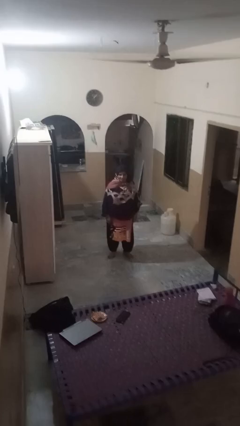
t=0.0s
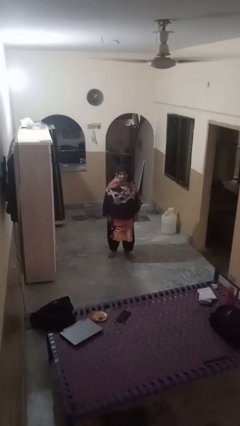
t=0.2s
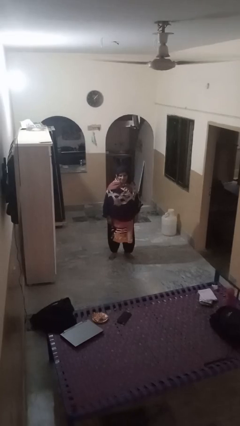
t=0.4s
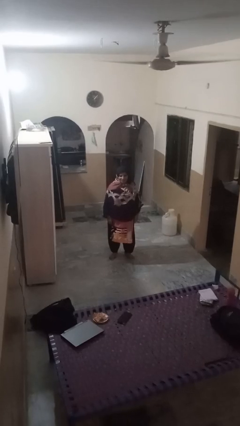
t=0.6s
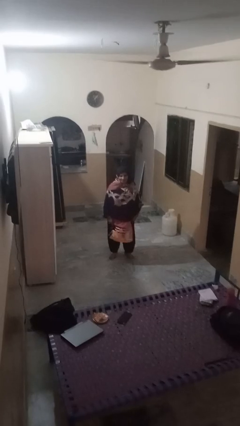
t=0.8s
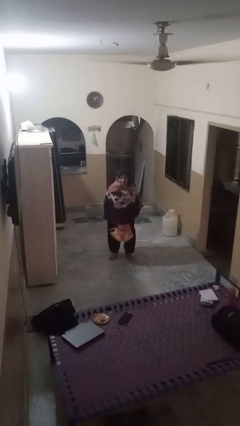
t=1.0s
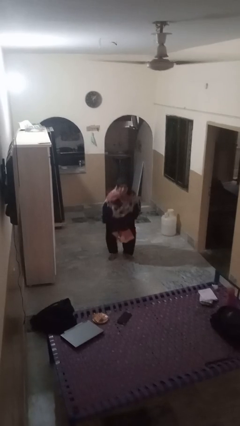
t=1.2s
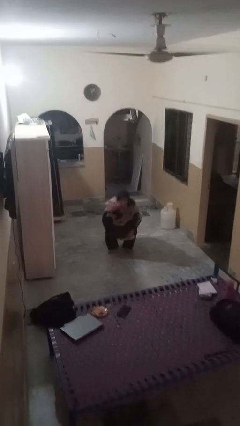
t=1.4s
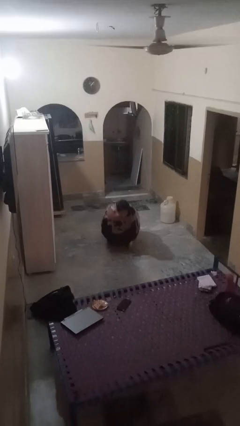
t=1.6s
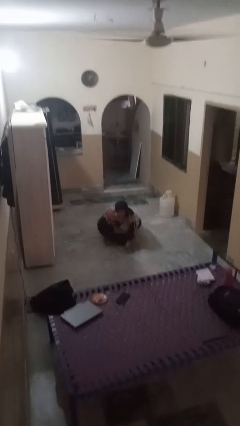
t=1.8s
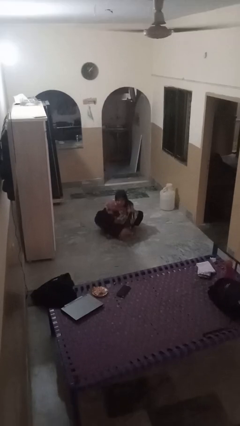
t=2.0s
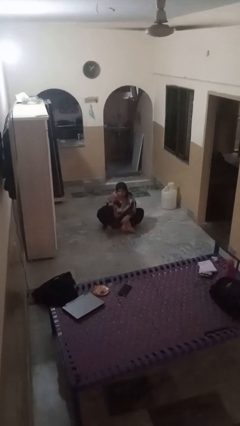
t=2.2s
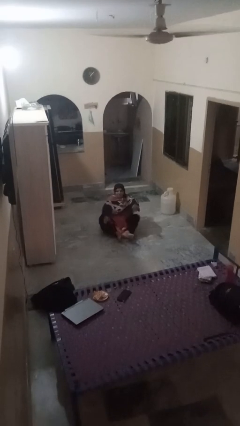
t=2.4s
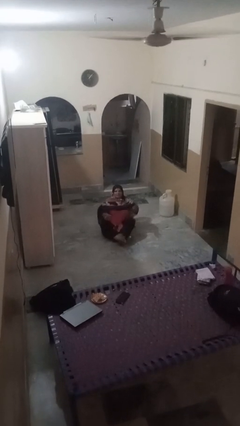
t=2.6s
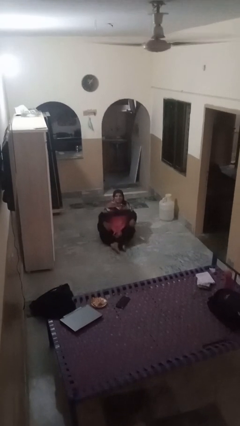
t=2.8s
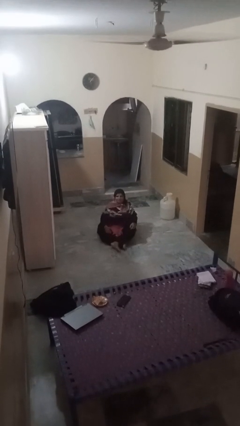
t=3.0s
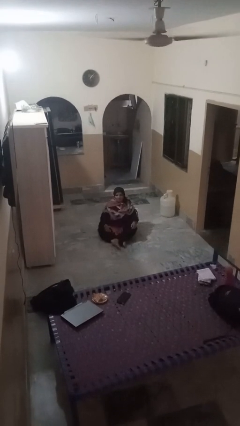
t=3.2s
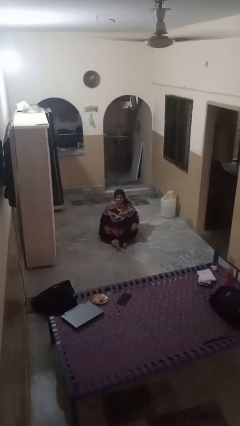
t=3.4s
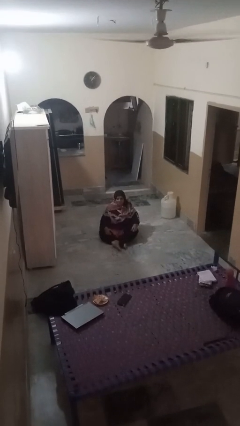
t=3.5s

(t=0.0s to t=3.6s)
person sits crisscross

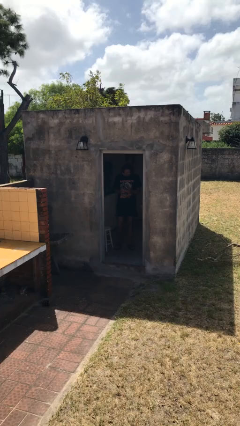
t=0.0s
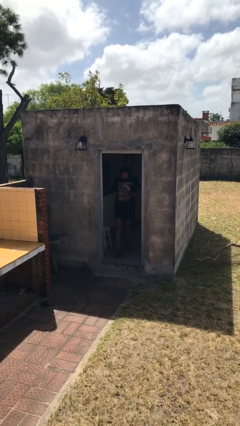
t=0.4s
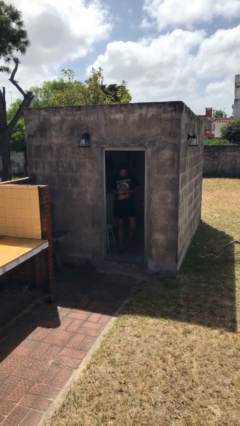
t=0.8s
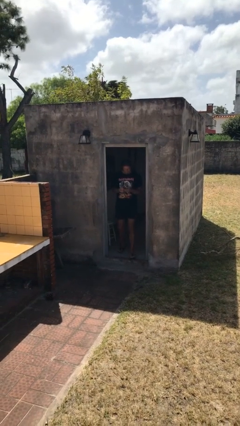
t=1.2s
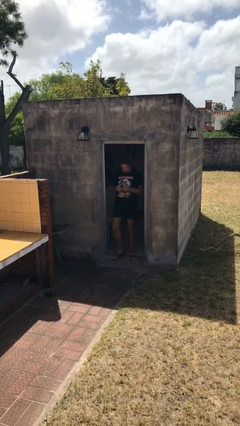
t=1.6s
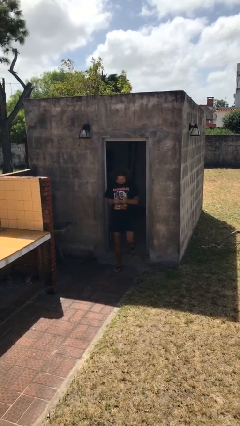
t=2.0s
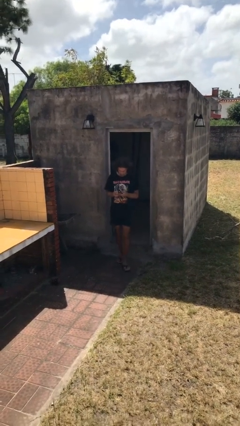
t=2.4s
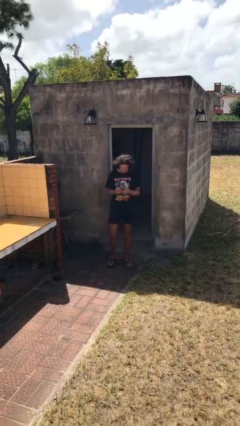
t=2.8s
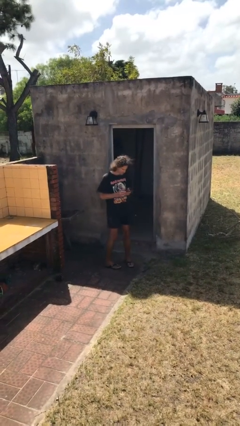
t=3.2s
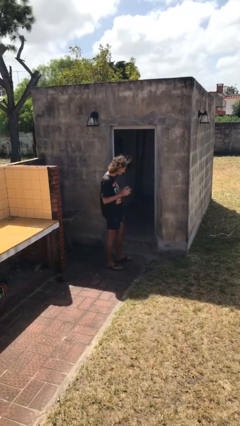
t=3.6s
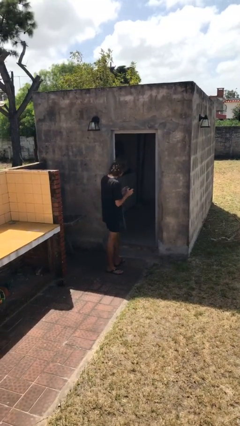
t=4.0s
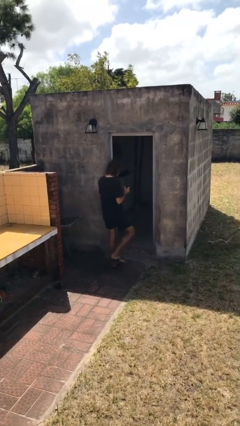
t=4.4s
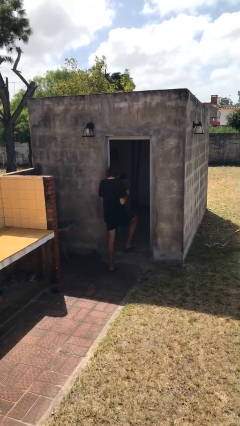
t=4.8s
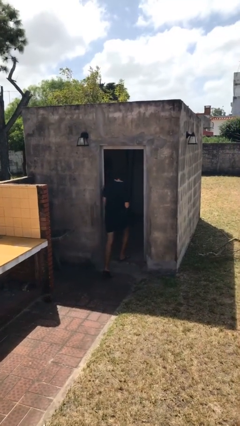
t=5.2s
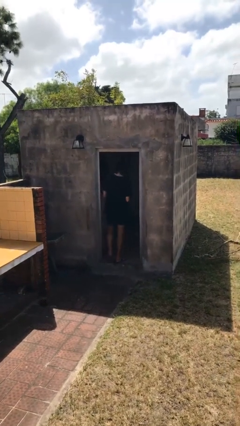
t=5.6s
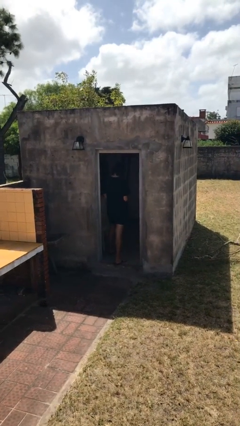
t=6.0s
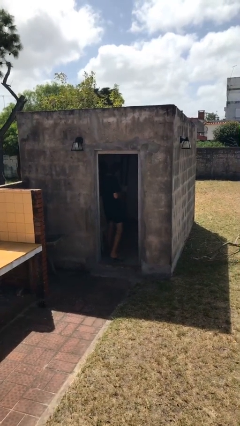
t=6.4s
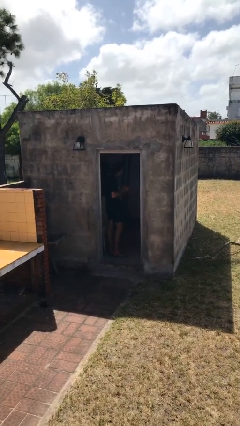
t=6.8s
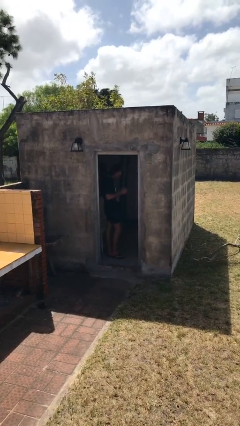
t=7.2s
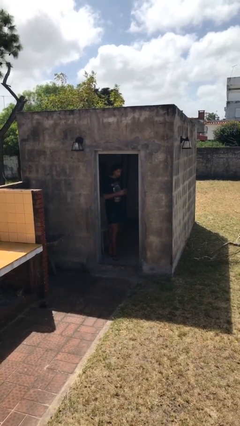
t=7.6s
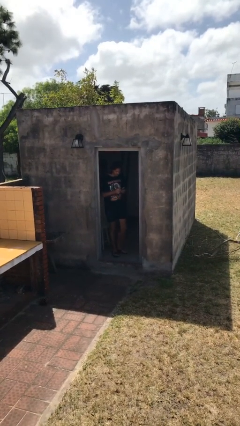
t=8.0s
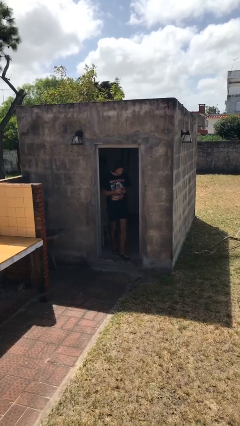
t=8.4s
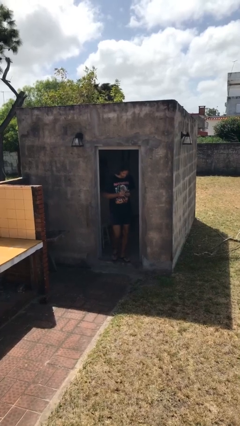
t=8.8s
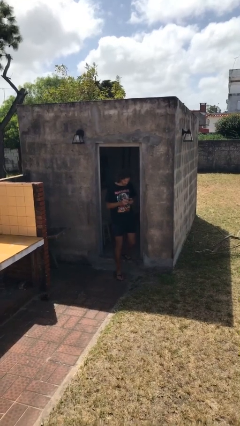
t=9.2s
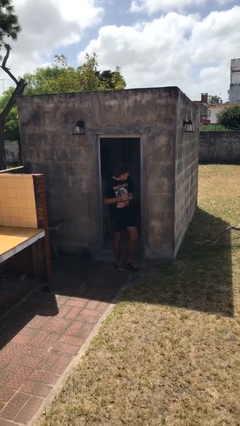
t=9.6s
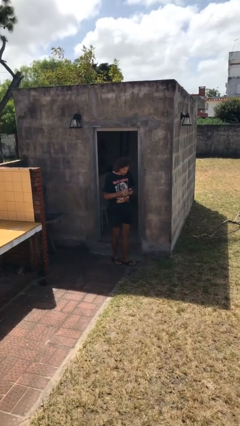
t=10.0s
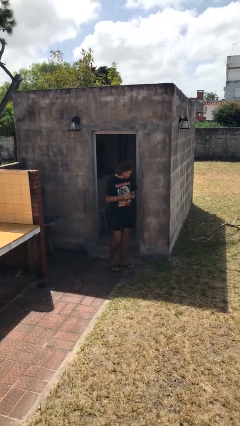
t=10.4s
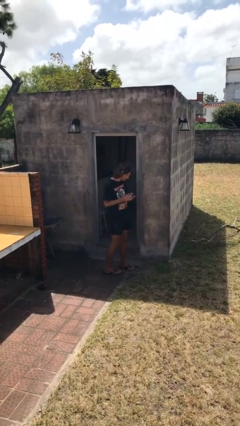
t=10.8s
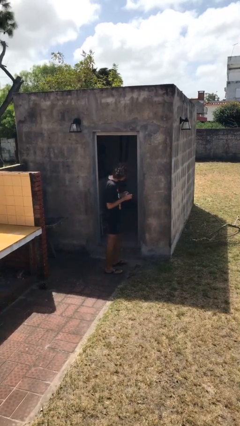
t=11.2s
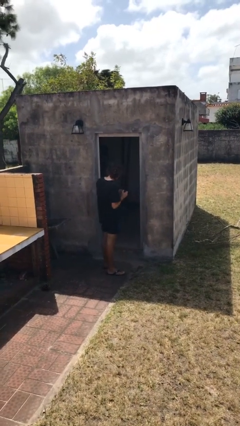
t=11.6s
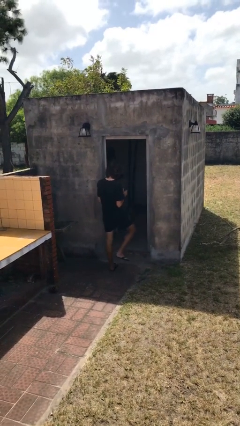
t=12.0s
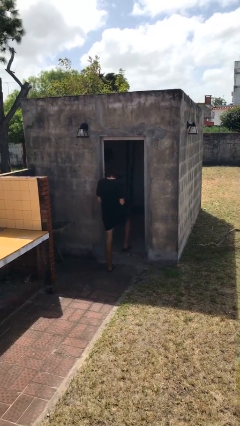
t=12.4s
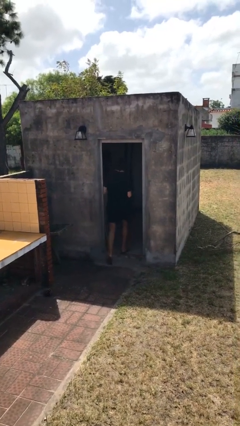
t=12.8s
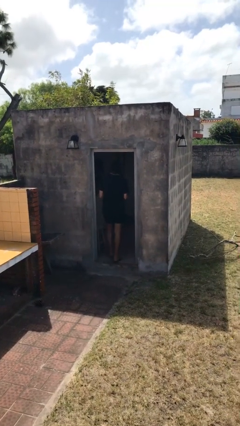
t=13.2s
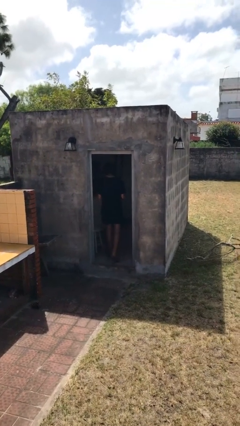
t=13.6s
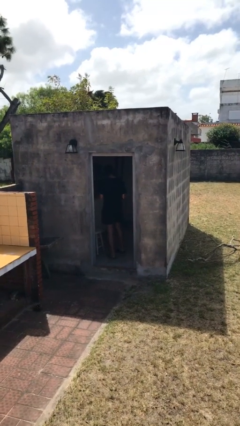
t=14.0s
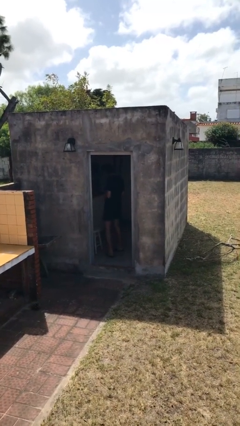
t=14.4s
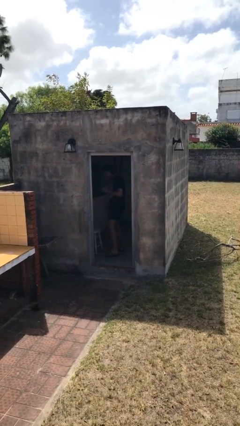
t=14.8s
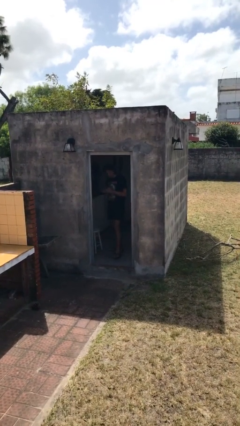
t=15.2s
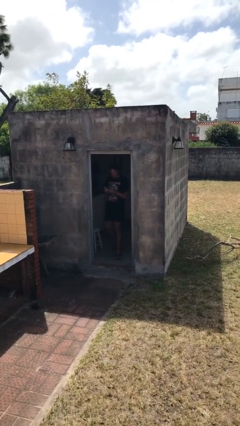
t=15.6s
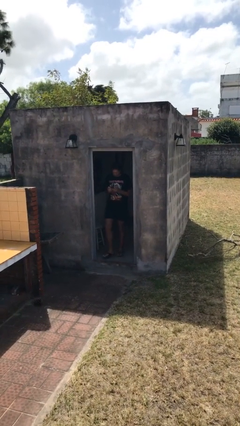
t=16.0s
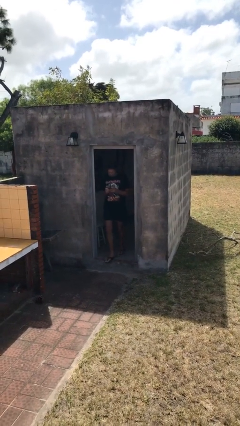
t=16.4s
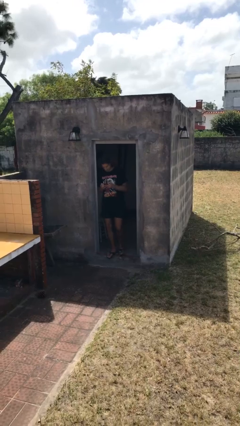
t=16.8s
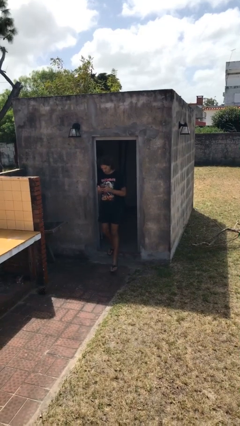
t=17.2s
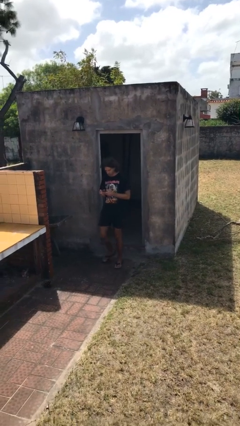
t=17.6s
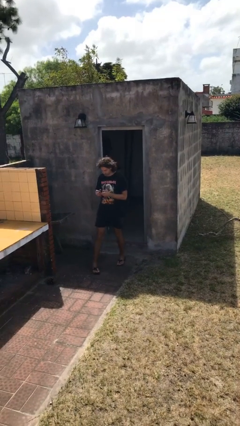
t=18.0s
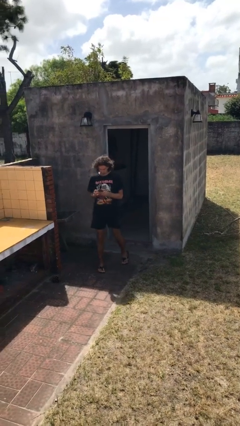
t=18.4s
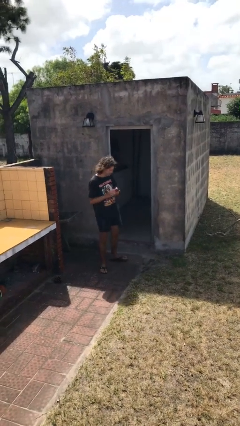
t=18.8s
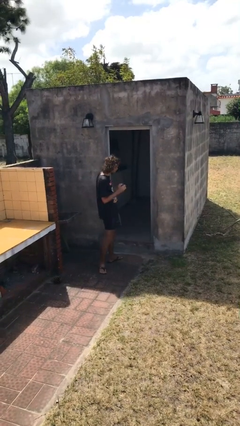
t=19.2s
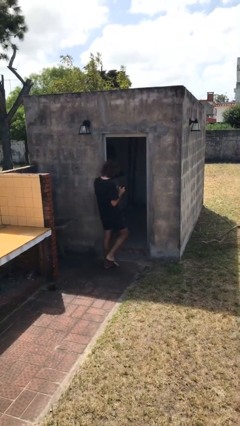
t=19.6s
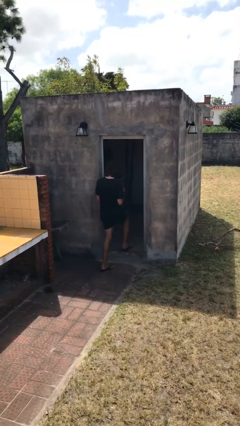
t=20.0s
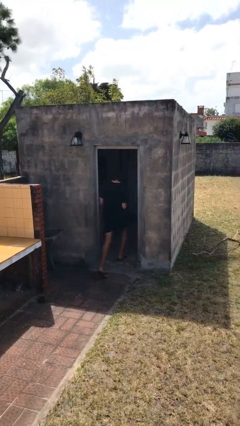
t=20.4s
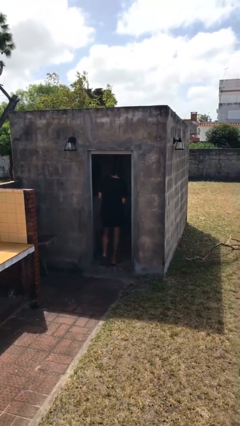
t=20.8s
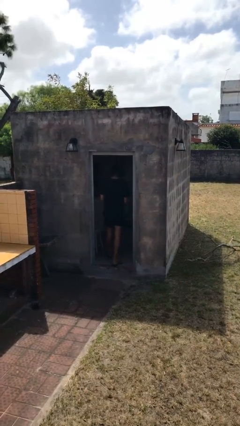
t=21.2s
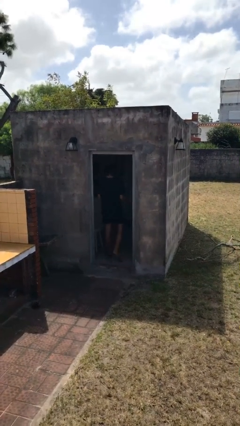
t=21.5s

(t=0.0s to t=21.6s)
person texts on phone

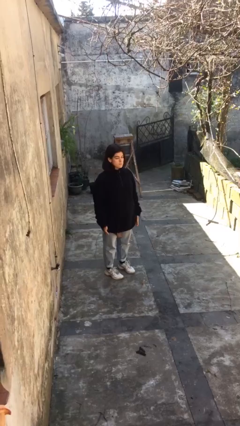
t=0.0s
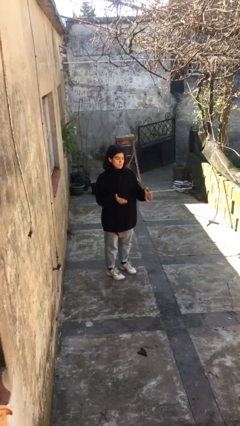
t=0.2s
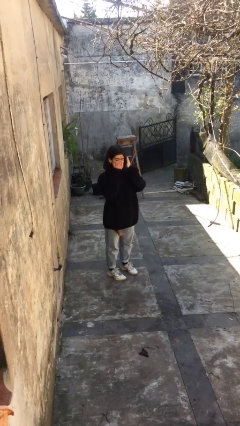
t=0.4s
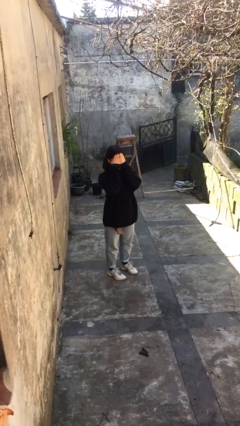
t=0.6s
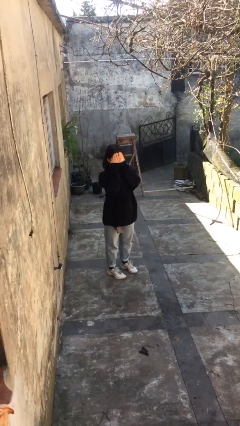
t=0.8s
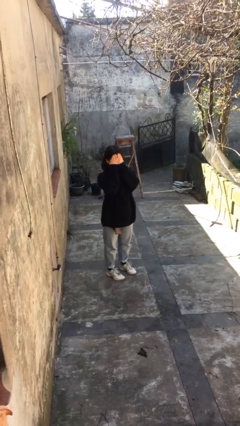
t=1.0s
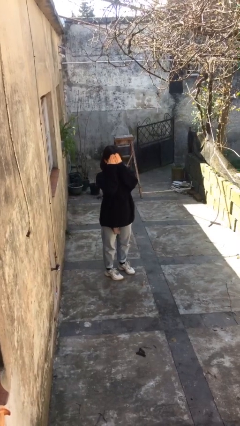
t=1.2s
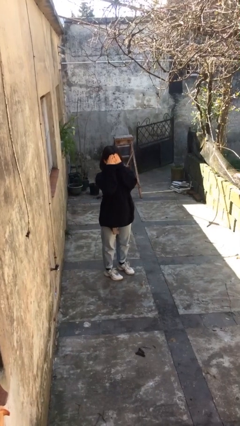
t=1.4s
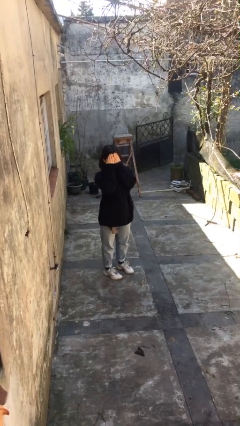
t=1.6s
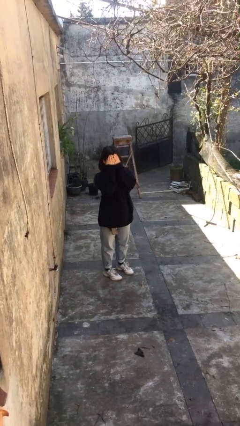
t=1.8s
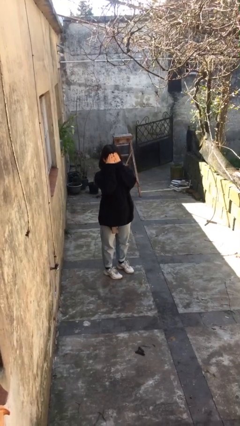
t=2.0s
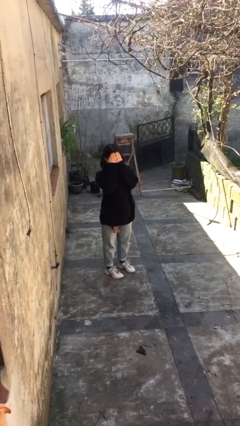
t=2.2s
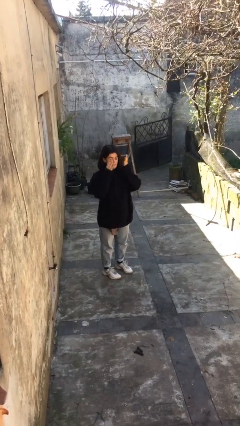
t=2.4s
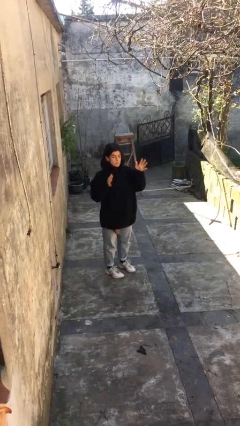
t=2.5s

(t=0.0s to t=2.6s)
person covers face with hands

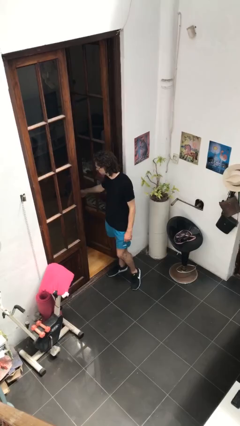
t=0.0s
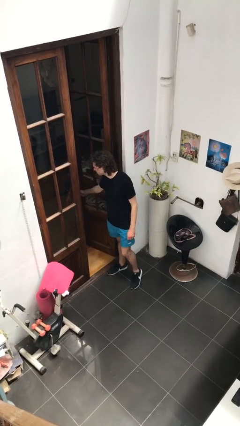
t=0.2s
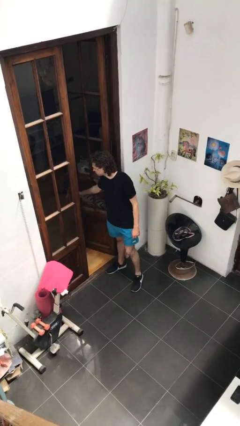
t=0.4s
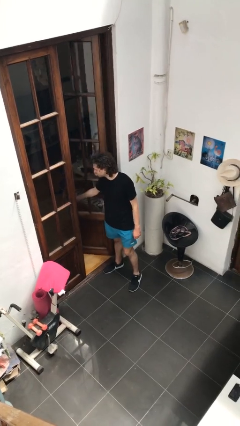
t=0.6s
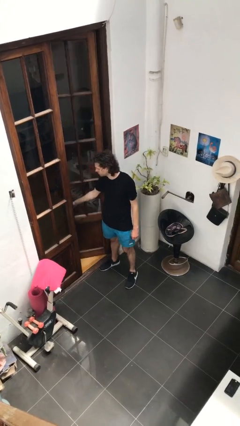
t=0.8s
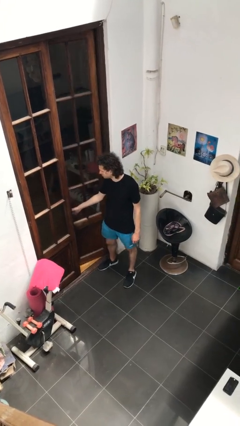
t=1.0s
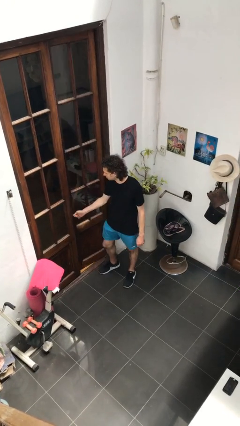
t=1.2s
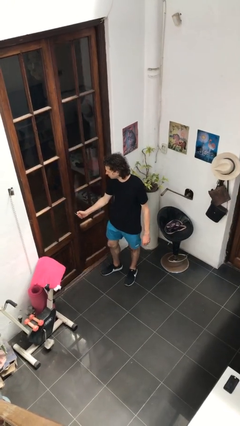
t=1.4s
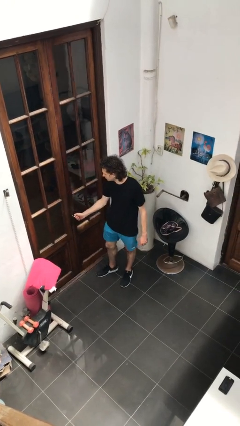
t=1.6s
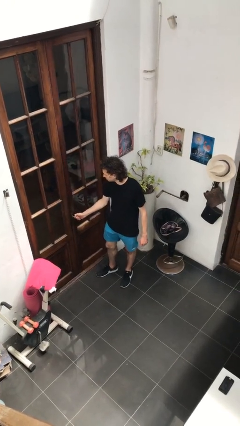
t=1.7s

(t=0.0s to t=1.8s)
person closes facility door
